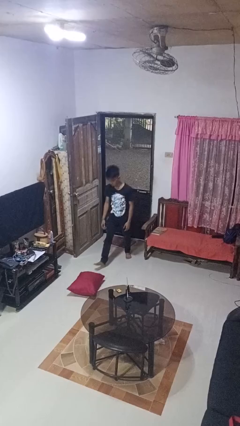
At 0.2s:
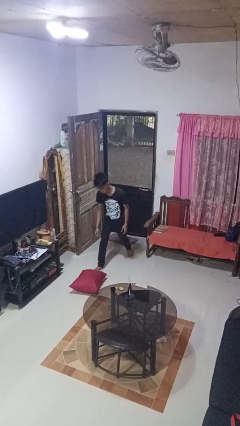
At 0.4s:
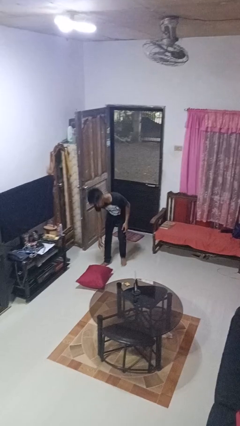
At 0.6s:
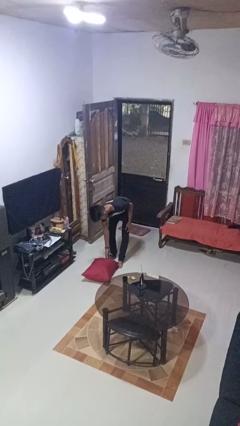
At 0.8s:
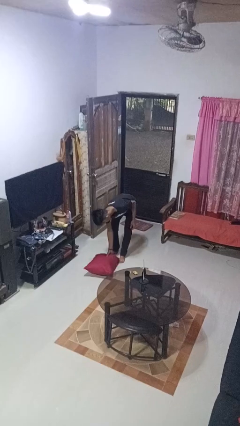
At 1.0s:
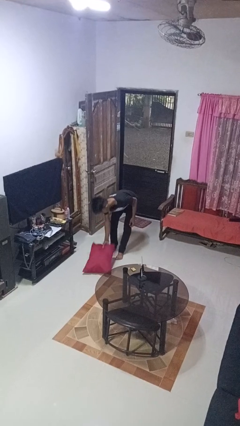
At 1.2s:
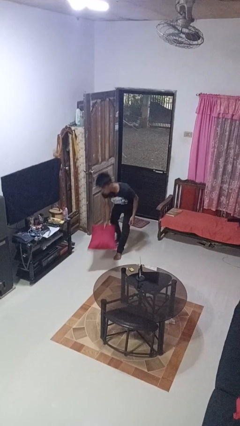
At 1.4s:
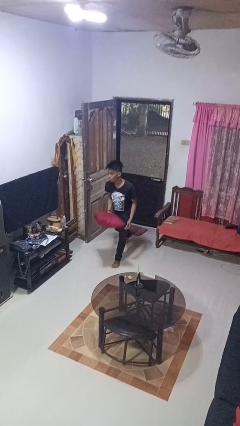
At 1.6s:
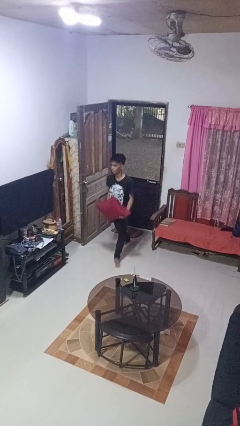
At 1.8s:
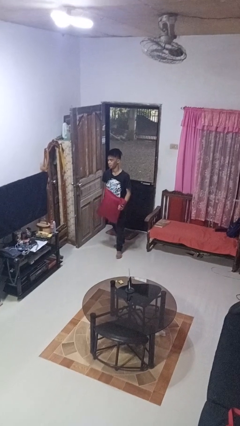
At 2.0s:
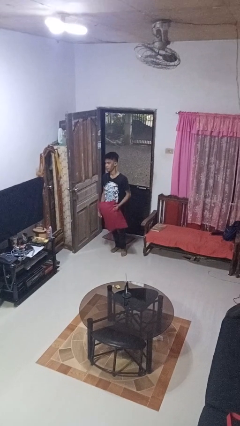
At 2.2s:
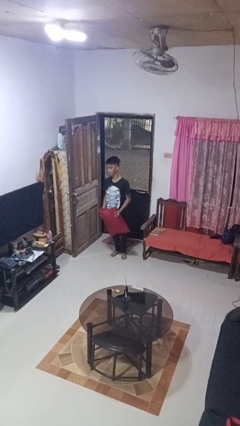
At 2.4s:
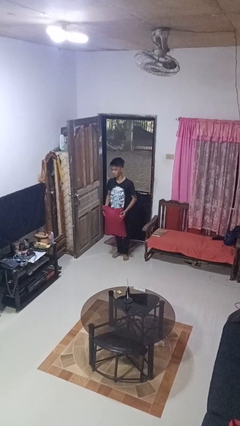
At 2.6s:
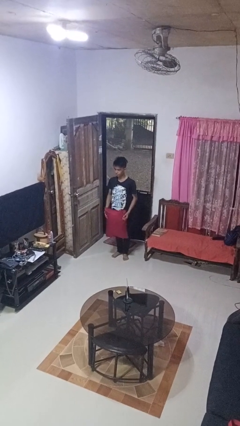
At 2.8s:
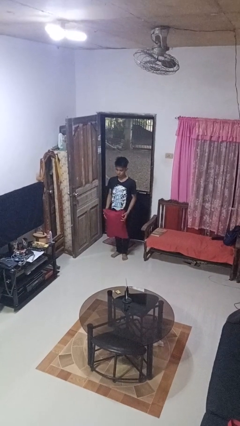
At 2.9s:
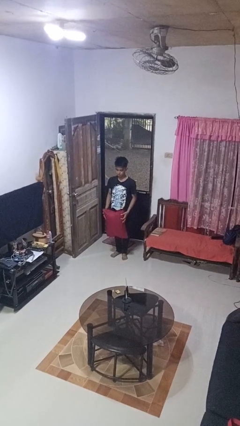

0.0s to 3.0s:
person picks up object from floor

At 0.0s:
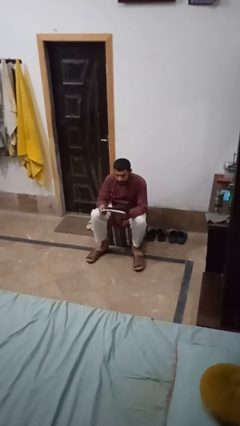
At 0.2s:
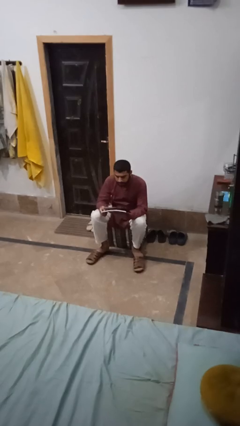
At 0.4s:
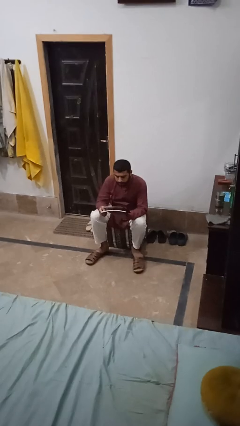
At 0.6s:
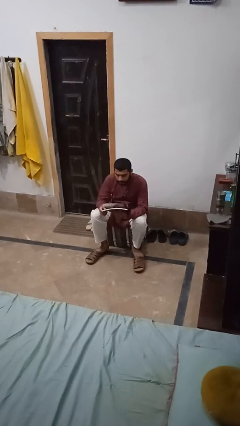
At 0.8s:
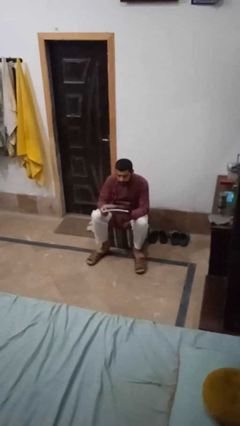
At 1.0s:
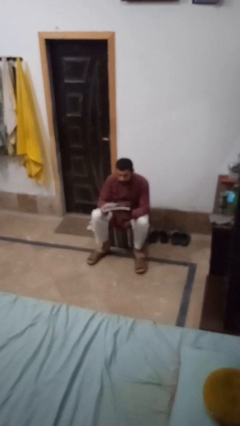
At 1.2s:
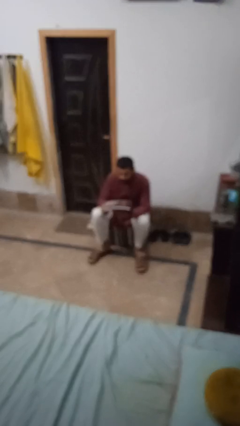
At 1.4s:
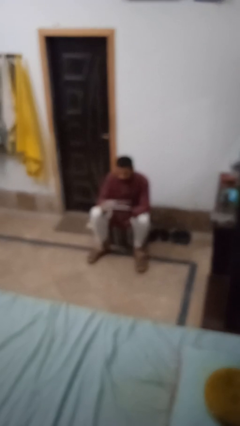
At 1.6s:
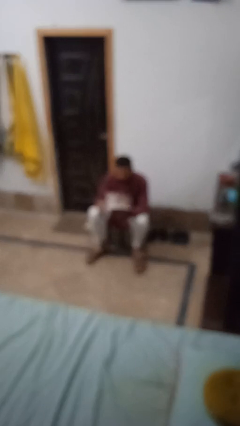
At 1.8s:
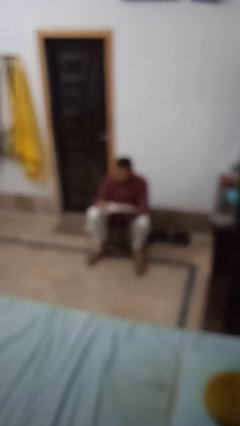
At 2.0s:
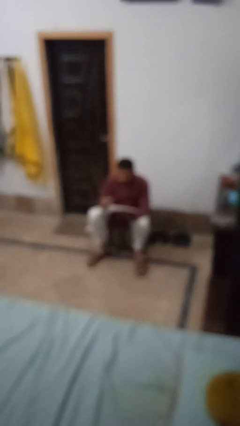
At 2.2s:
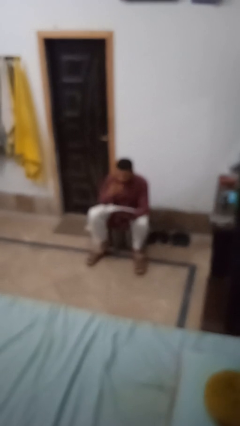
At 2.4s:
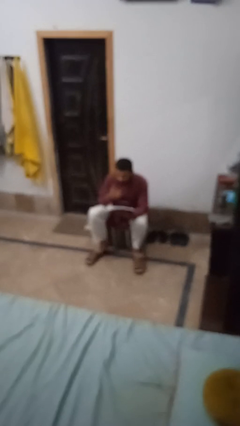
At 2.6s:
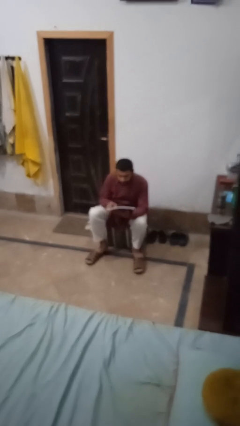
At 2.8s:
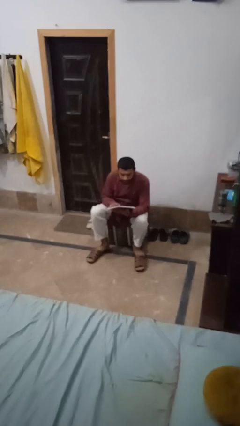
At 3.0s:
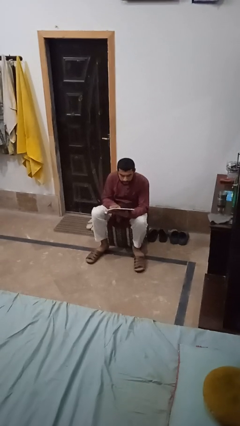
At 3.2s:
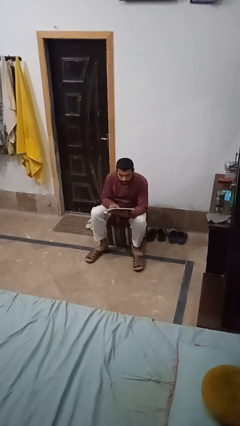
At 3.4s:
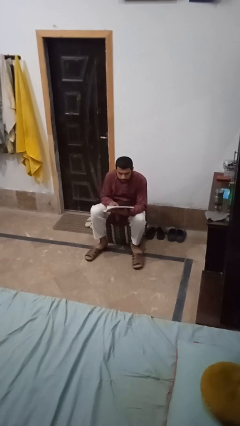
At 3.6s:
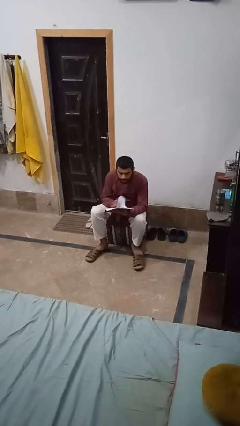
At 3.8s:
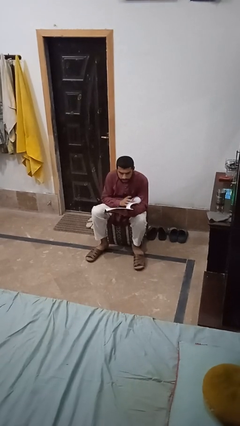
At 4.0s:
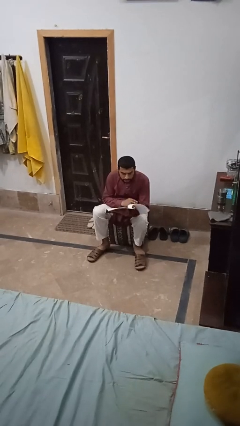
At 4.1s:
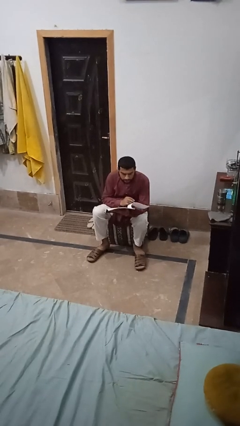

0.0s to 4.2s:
person sits crisscross

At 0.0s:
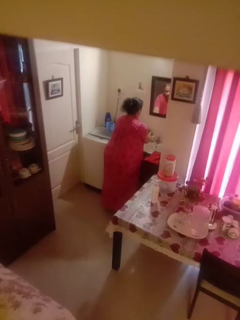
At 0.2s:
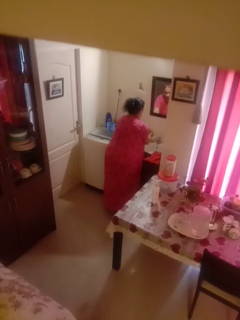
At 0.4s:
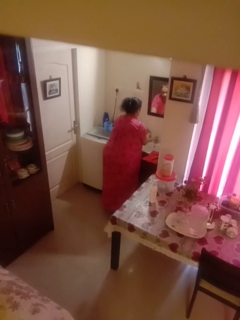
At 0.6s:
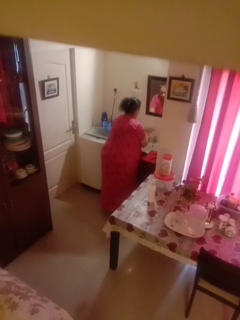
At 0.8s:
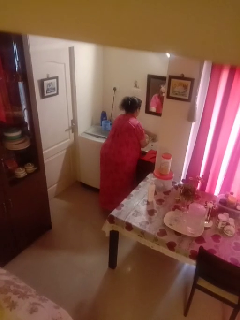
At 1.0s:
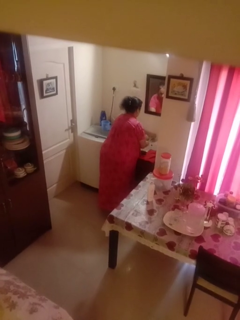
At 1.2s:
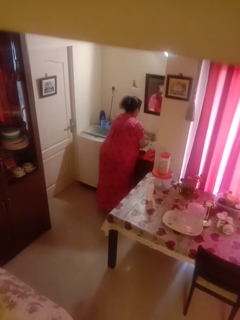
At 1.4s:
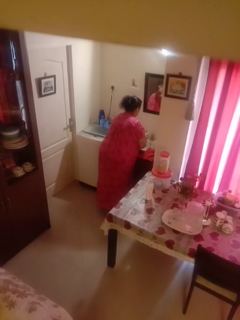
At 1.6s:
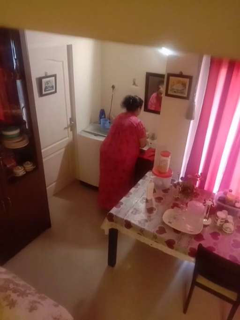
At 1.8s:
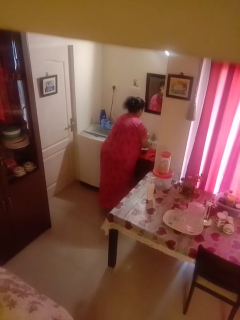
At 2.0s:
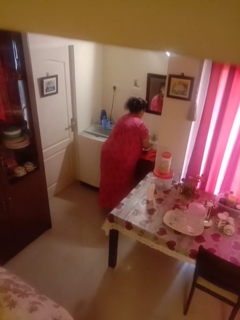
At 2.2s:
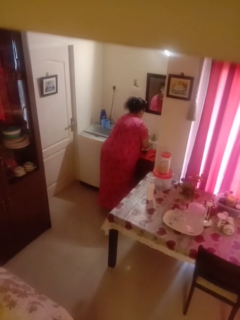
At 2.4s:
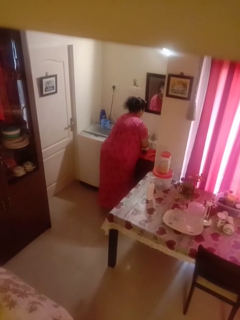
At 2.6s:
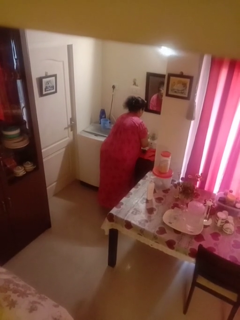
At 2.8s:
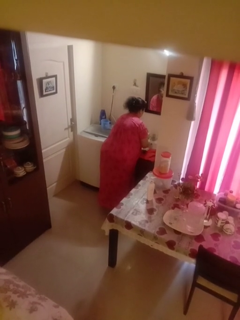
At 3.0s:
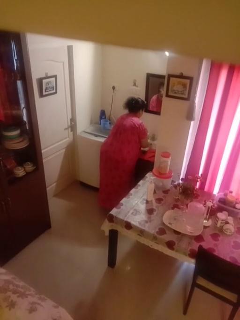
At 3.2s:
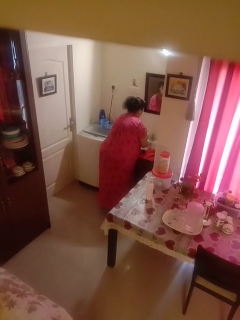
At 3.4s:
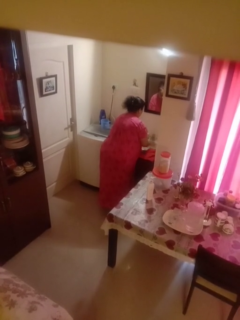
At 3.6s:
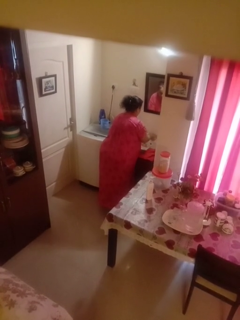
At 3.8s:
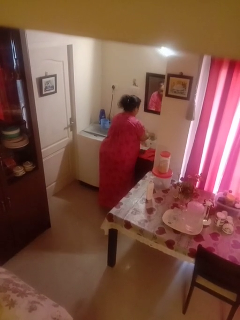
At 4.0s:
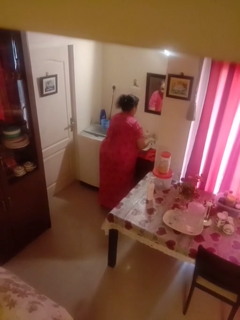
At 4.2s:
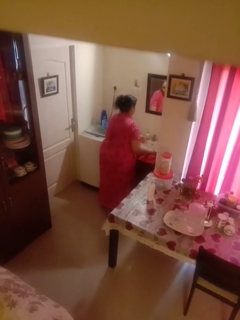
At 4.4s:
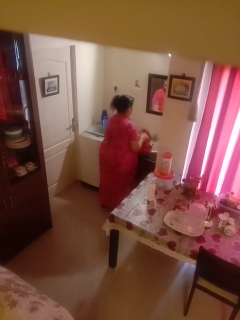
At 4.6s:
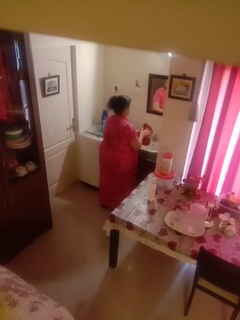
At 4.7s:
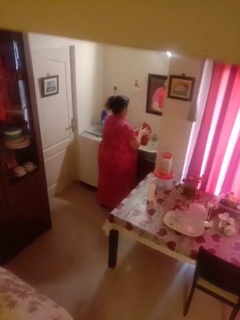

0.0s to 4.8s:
person washes hands

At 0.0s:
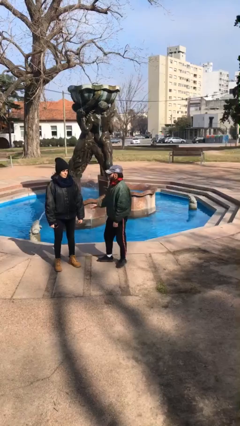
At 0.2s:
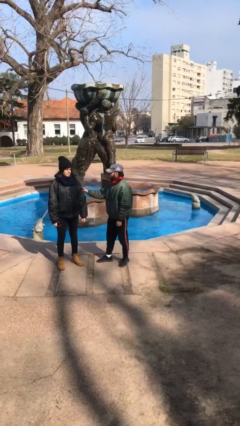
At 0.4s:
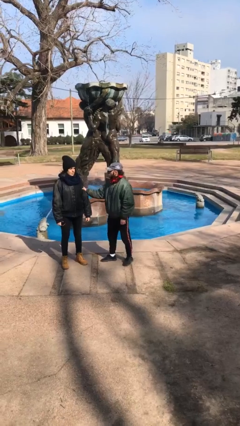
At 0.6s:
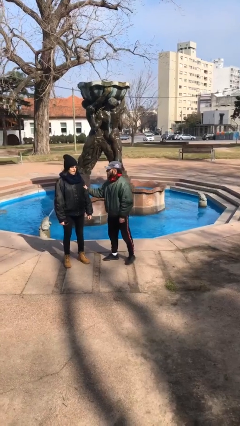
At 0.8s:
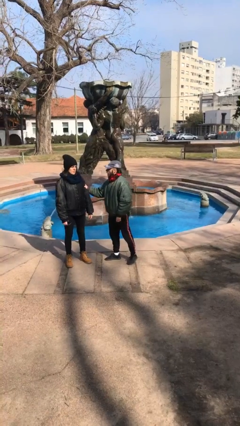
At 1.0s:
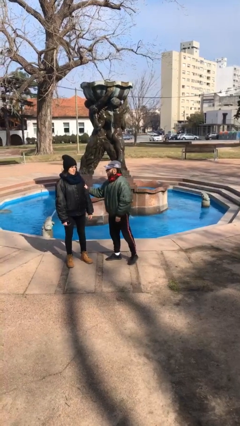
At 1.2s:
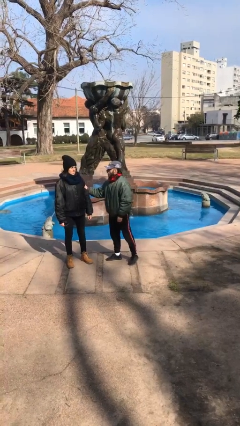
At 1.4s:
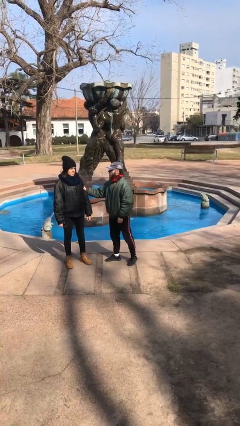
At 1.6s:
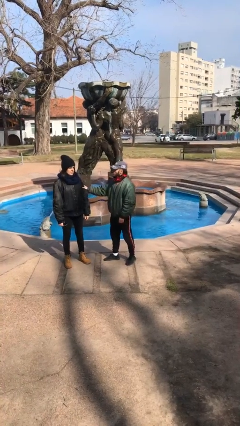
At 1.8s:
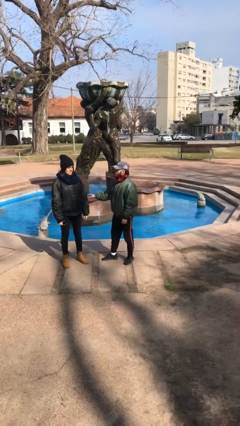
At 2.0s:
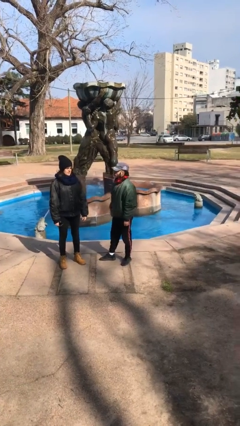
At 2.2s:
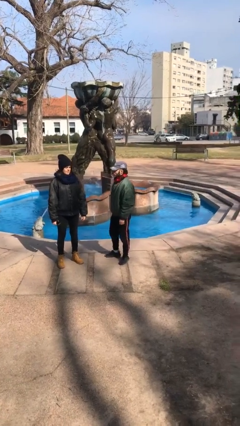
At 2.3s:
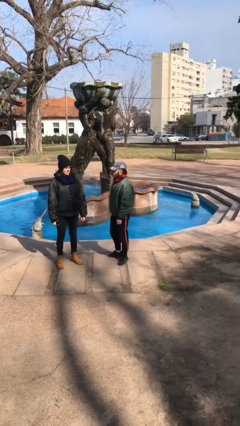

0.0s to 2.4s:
person grabs person by bicep

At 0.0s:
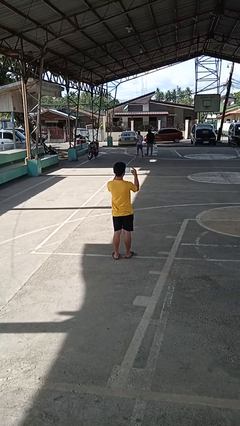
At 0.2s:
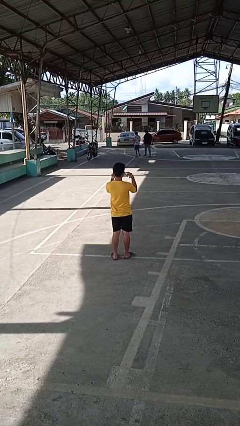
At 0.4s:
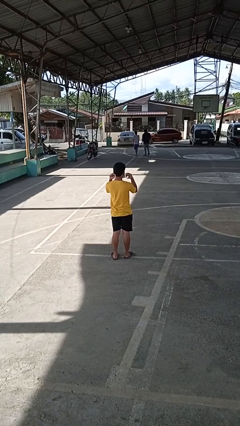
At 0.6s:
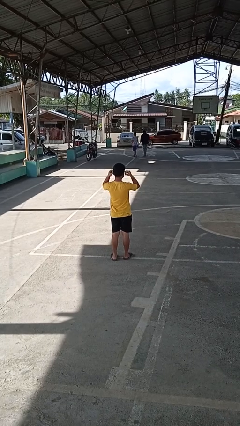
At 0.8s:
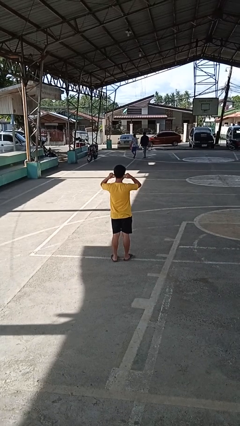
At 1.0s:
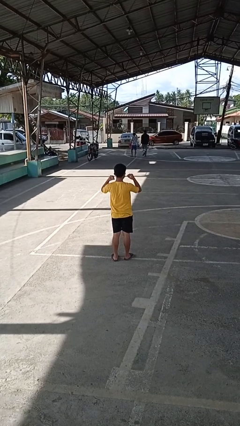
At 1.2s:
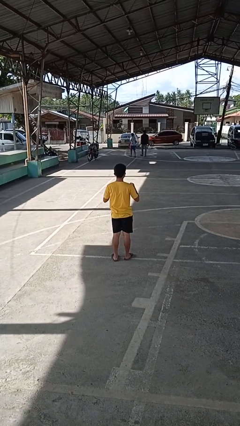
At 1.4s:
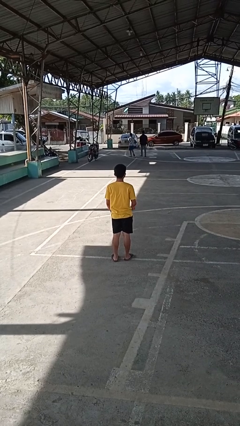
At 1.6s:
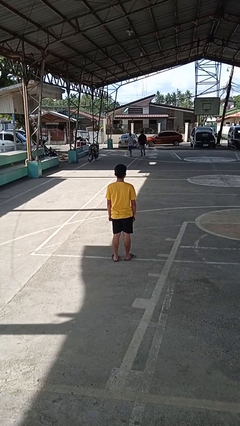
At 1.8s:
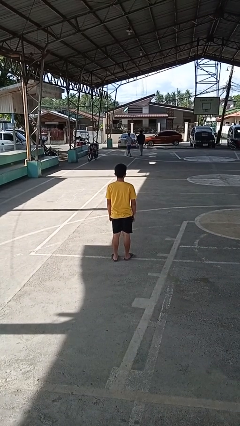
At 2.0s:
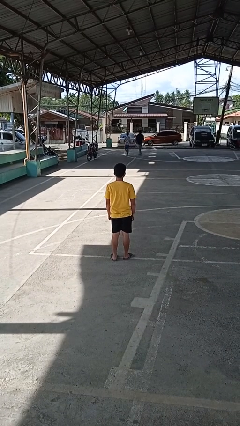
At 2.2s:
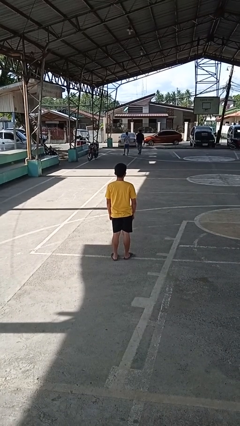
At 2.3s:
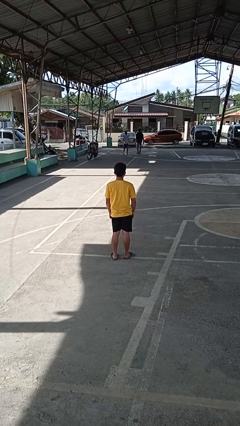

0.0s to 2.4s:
person puts on facemask

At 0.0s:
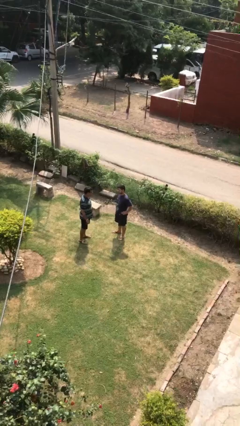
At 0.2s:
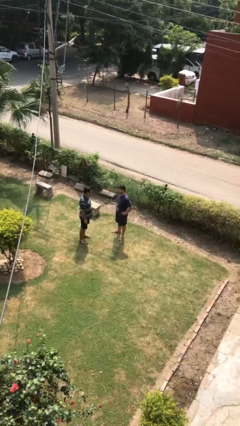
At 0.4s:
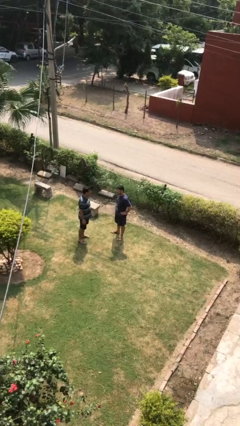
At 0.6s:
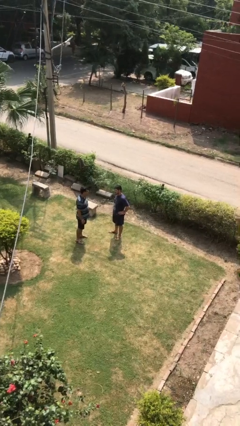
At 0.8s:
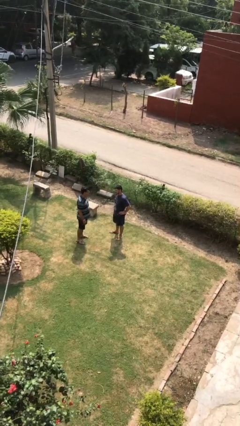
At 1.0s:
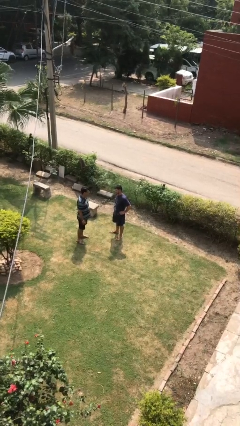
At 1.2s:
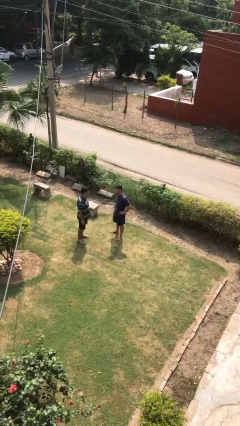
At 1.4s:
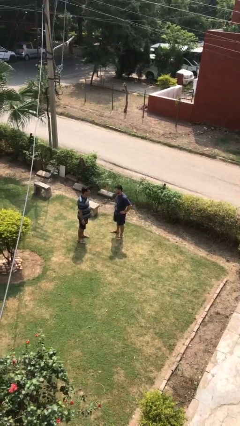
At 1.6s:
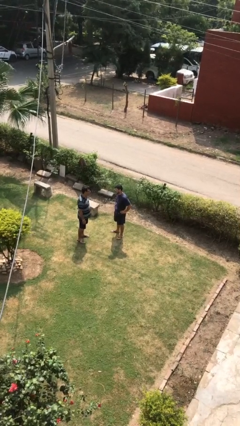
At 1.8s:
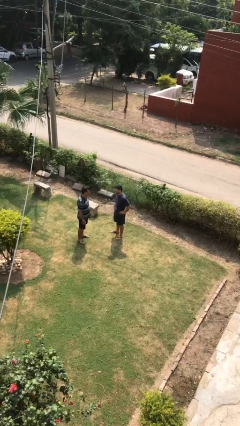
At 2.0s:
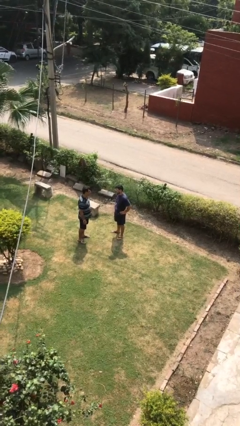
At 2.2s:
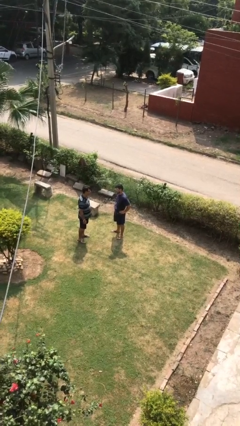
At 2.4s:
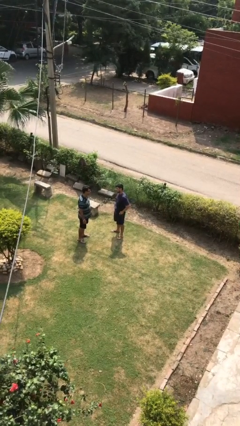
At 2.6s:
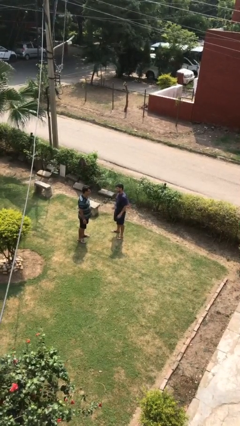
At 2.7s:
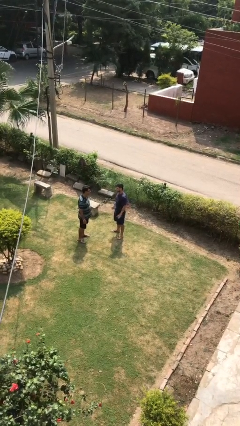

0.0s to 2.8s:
person talks to person
